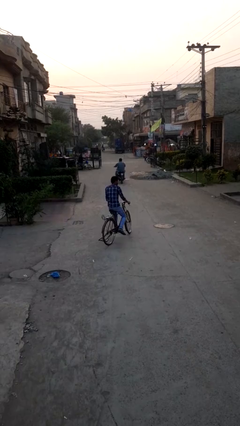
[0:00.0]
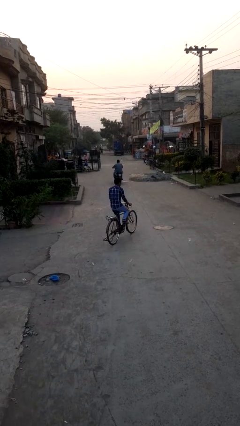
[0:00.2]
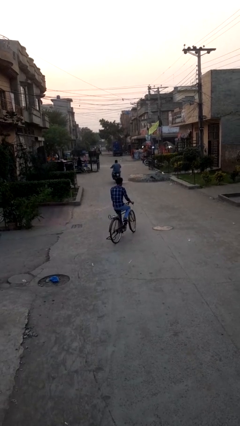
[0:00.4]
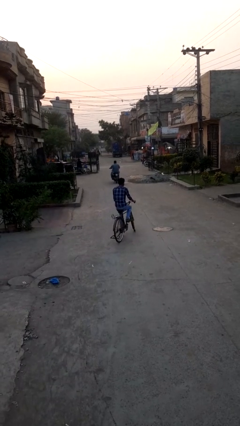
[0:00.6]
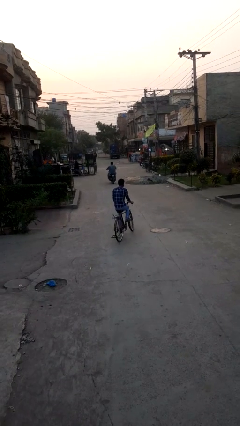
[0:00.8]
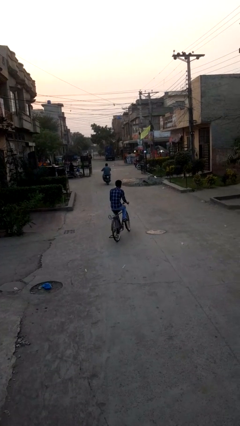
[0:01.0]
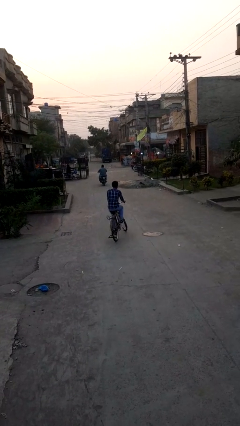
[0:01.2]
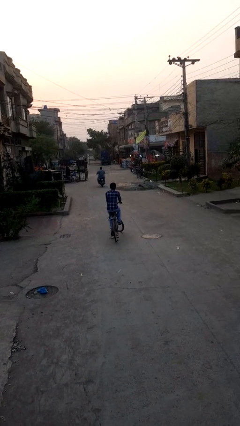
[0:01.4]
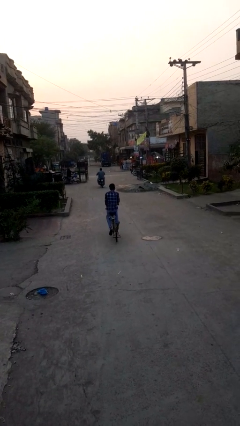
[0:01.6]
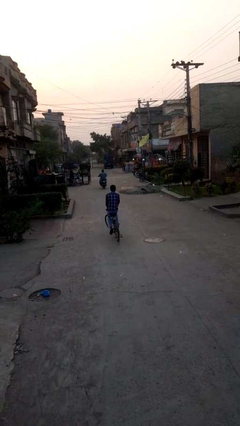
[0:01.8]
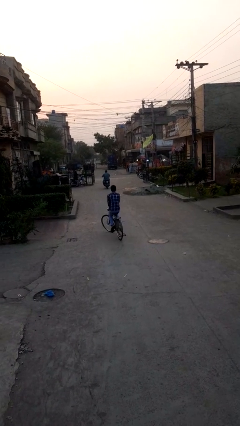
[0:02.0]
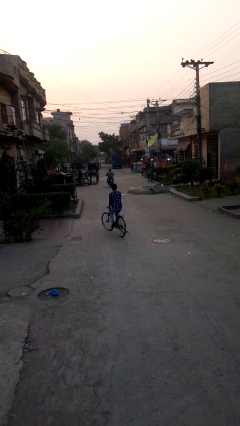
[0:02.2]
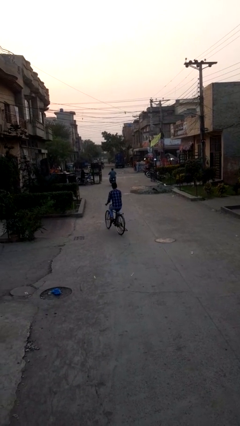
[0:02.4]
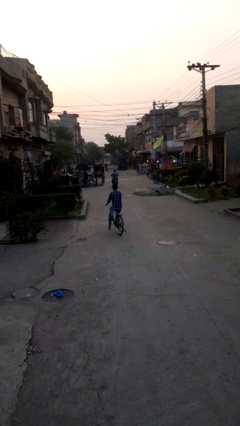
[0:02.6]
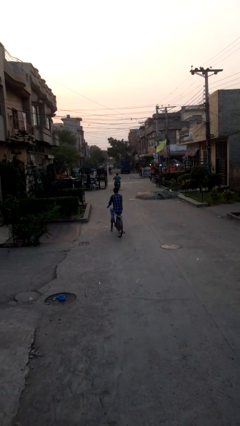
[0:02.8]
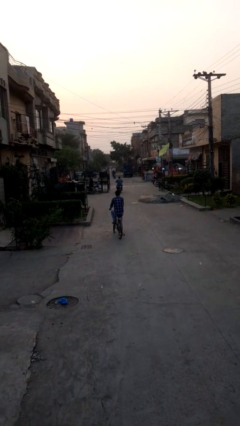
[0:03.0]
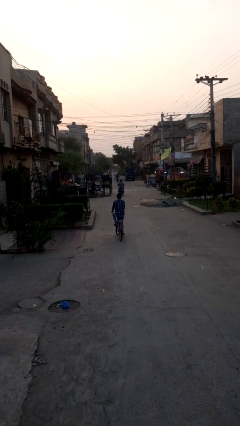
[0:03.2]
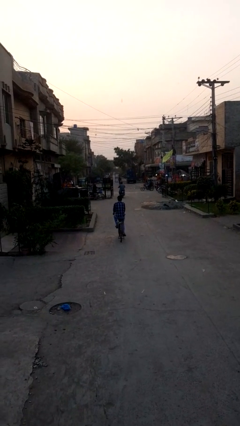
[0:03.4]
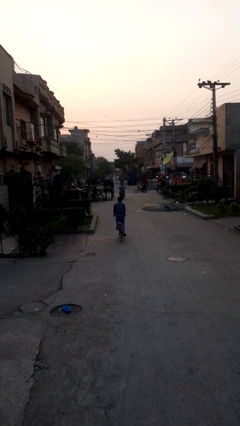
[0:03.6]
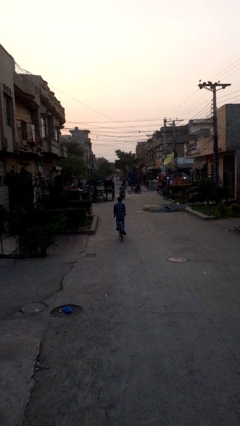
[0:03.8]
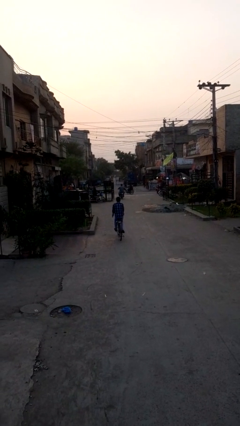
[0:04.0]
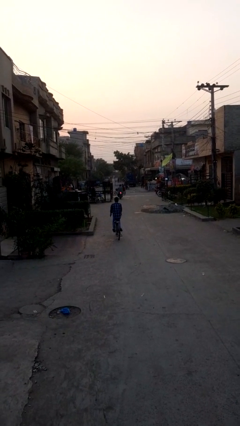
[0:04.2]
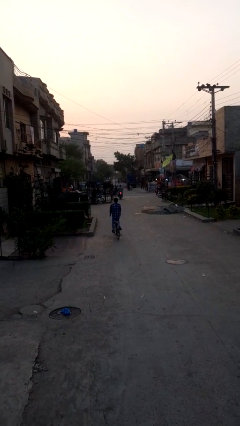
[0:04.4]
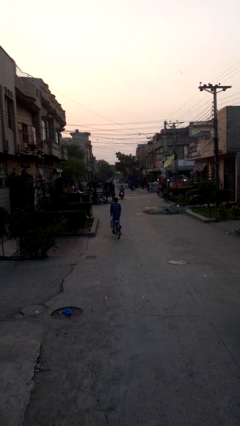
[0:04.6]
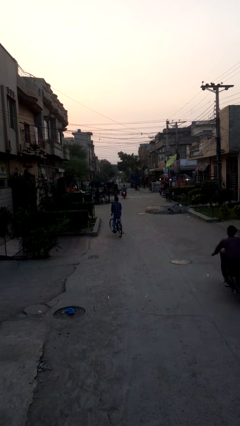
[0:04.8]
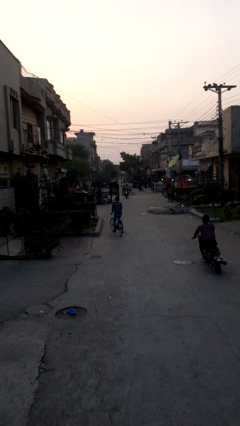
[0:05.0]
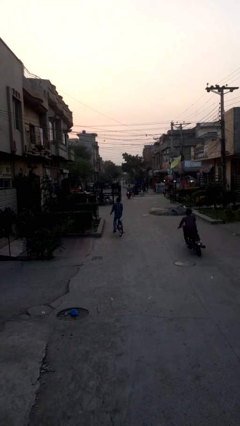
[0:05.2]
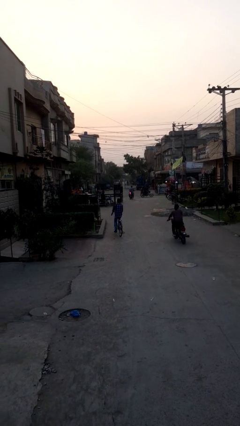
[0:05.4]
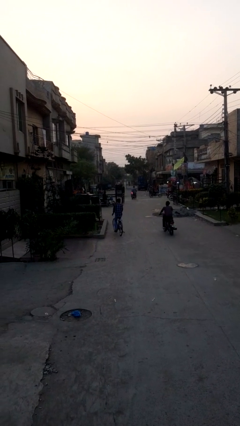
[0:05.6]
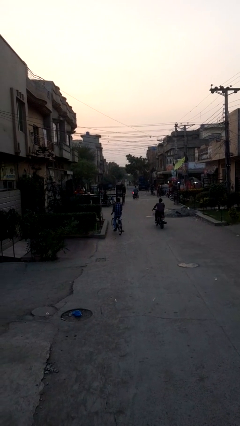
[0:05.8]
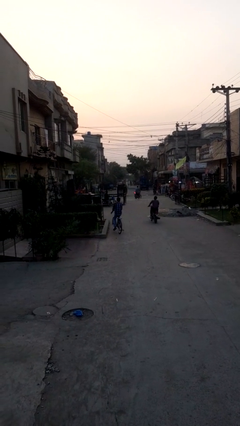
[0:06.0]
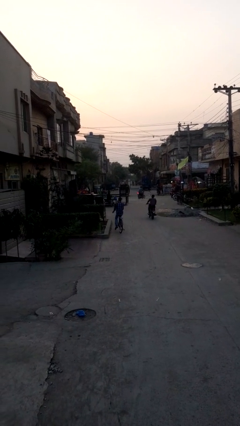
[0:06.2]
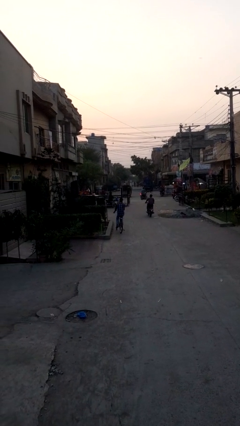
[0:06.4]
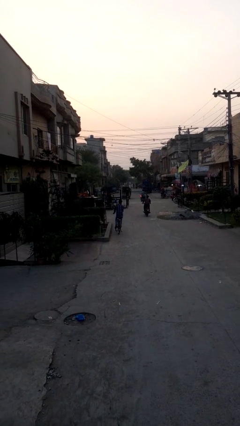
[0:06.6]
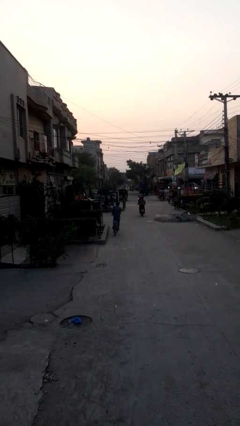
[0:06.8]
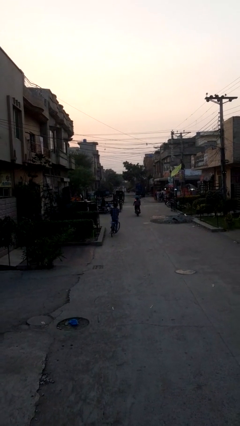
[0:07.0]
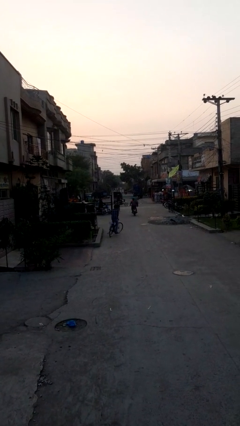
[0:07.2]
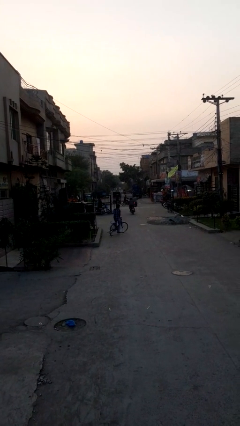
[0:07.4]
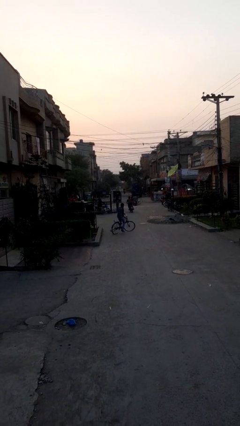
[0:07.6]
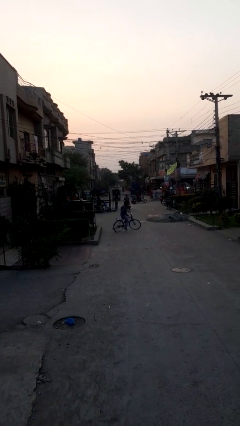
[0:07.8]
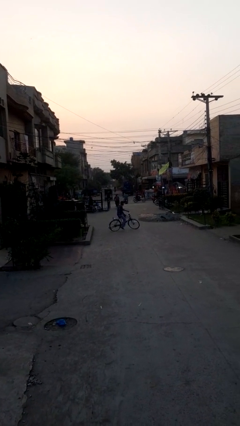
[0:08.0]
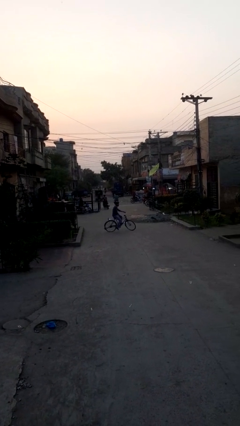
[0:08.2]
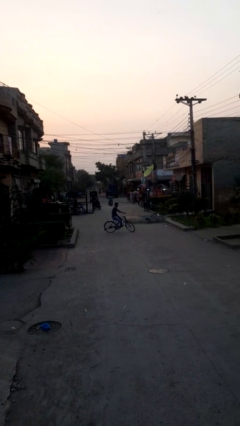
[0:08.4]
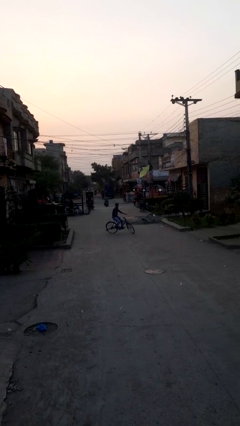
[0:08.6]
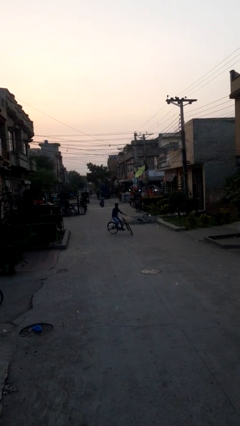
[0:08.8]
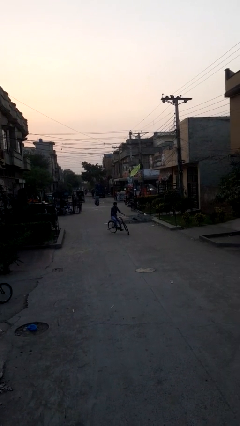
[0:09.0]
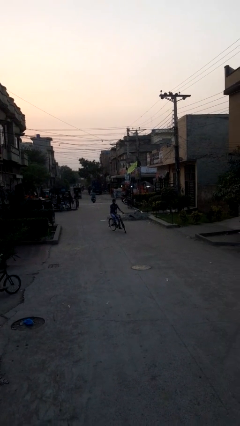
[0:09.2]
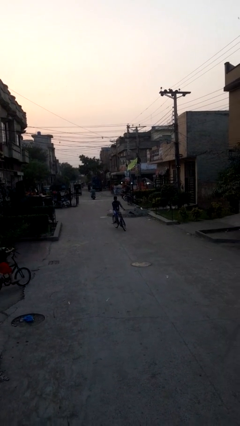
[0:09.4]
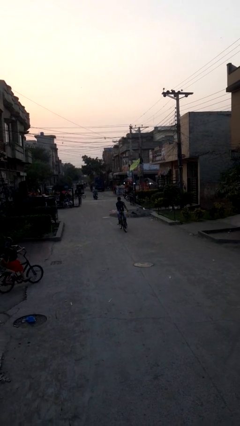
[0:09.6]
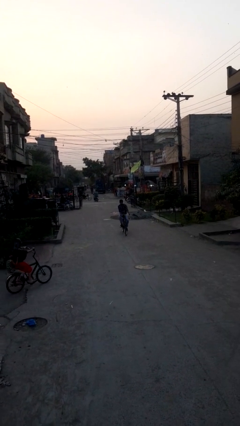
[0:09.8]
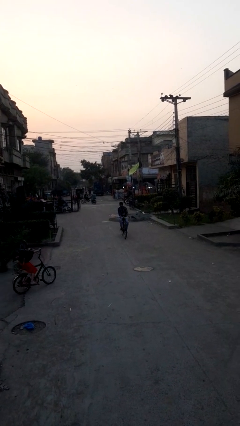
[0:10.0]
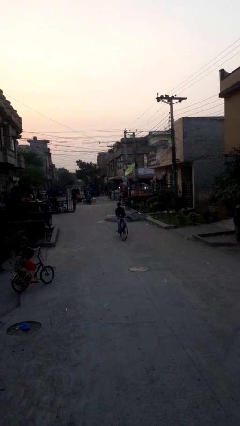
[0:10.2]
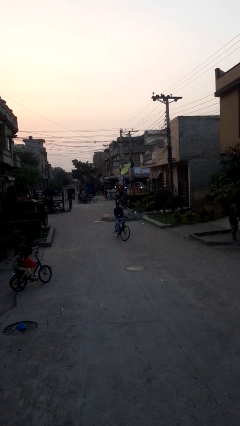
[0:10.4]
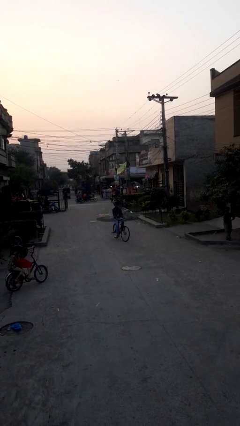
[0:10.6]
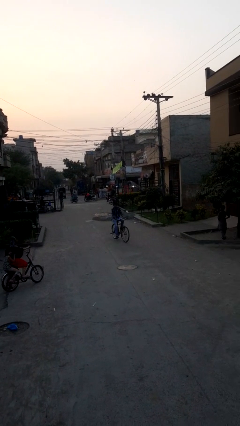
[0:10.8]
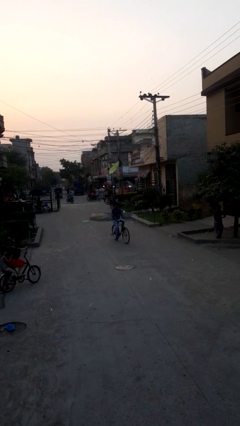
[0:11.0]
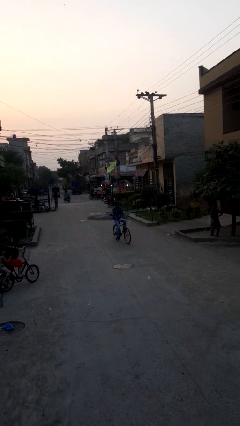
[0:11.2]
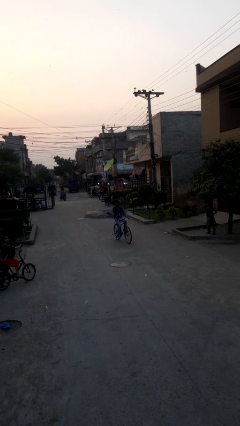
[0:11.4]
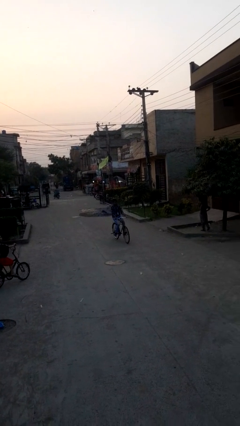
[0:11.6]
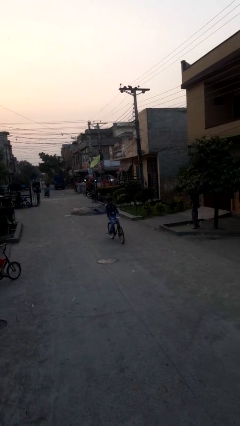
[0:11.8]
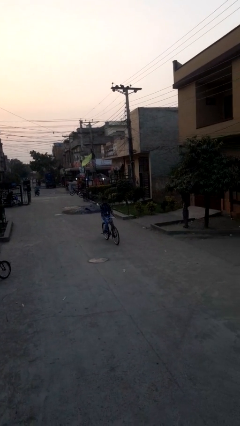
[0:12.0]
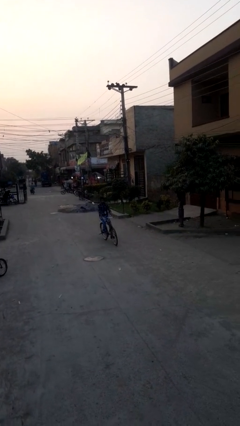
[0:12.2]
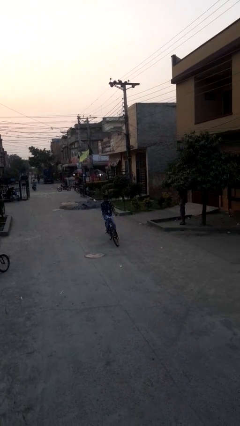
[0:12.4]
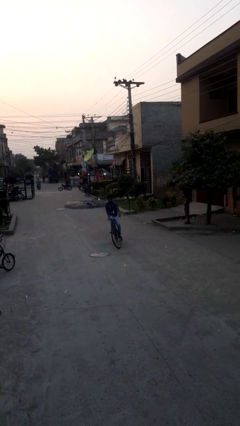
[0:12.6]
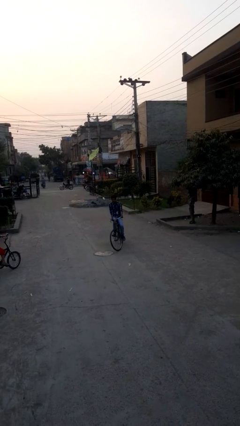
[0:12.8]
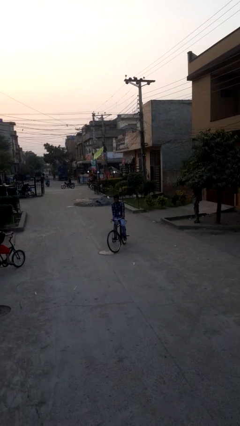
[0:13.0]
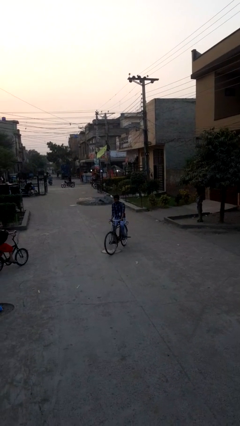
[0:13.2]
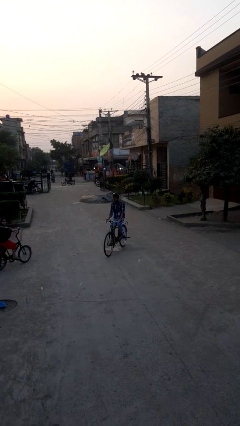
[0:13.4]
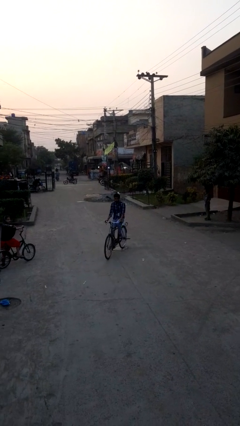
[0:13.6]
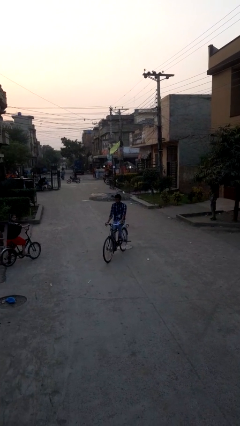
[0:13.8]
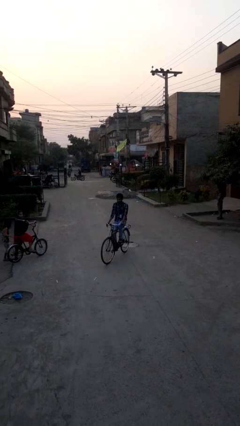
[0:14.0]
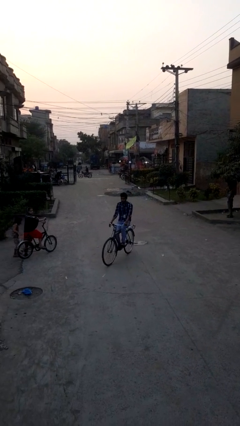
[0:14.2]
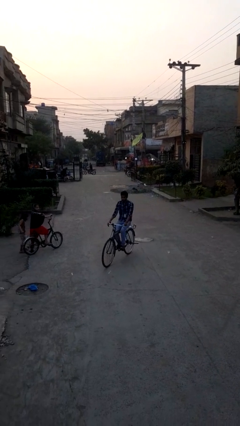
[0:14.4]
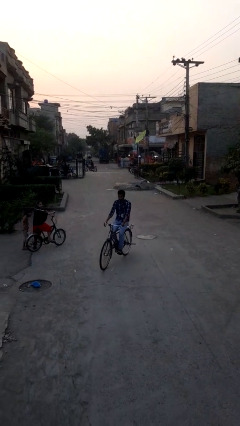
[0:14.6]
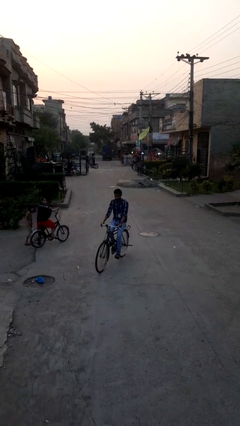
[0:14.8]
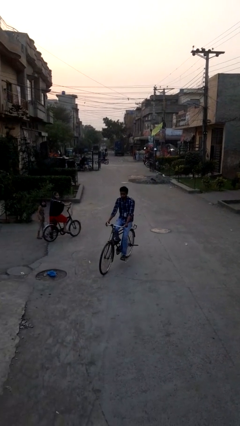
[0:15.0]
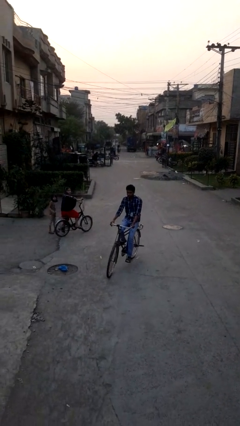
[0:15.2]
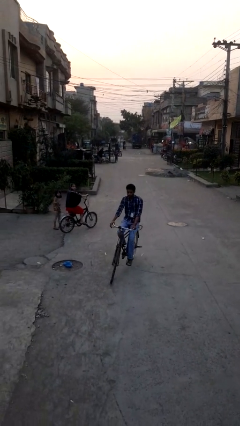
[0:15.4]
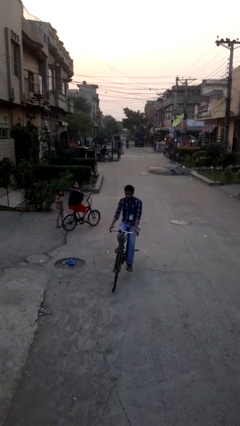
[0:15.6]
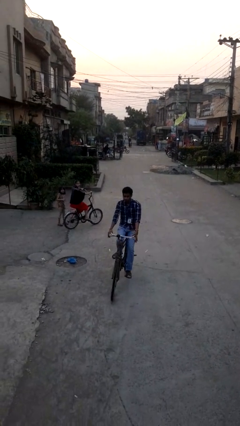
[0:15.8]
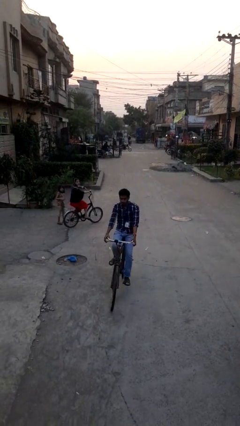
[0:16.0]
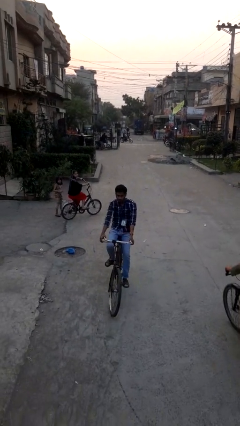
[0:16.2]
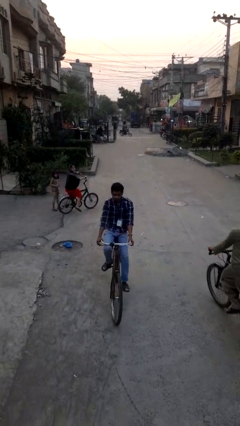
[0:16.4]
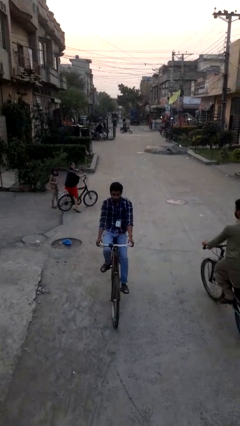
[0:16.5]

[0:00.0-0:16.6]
person rides bicycle

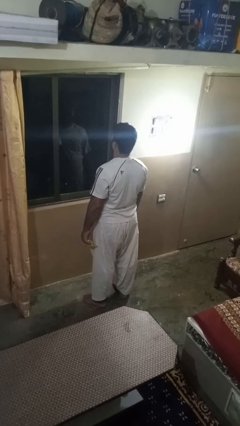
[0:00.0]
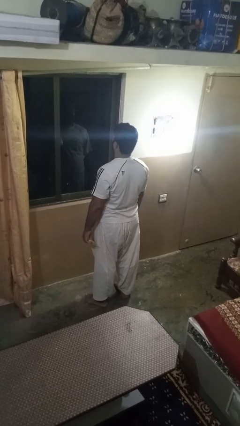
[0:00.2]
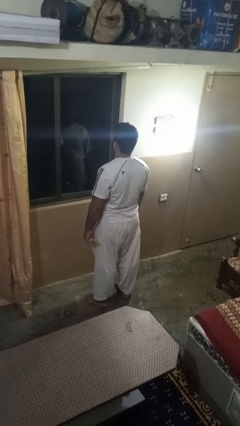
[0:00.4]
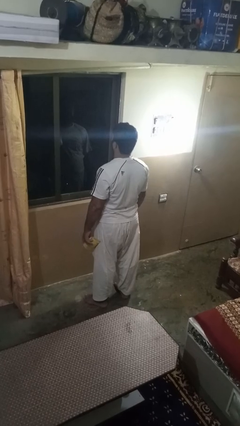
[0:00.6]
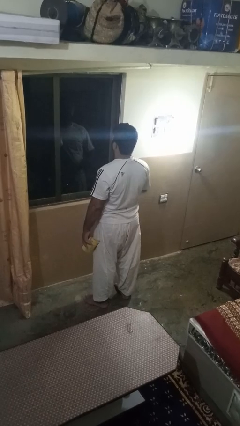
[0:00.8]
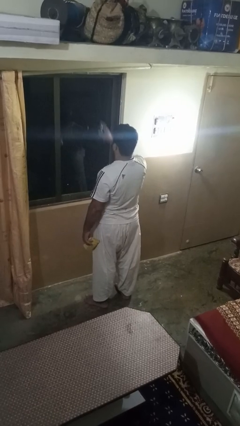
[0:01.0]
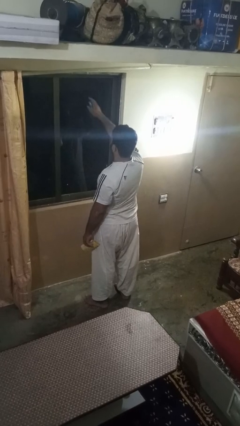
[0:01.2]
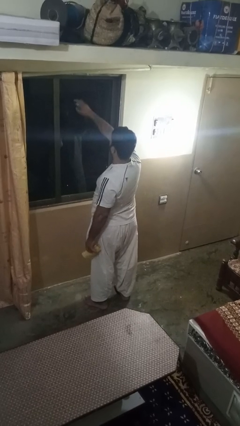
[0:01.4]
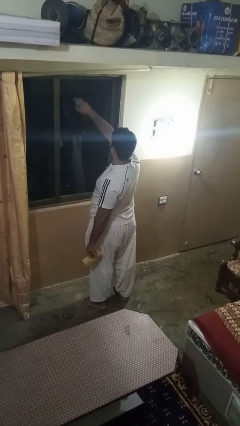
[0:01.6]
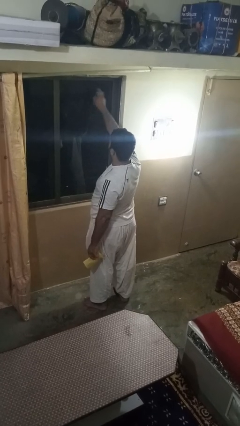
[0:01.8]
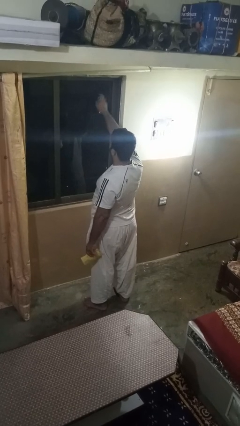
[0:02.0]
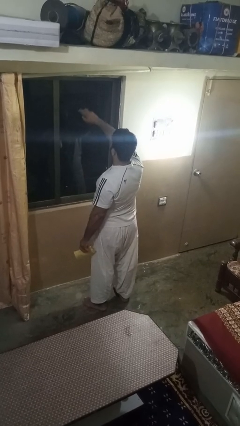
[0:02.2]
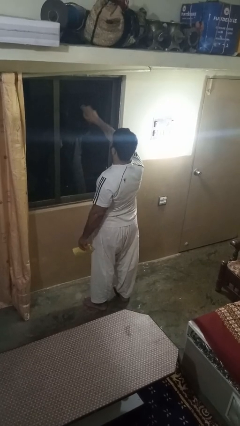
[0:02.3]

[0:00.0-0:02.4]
person sprays from bottle
